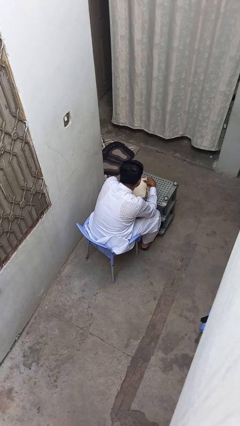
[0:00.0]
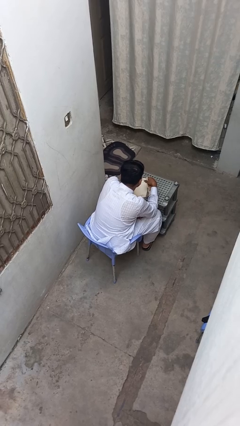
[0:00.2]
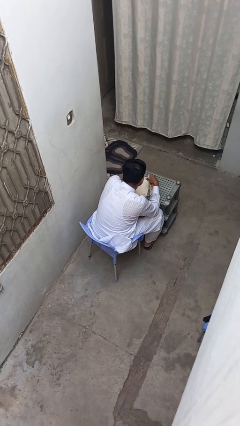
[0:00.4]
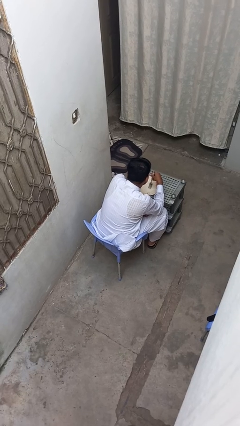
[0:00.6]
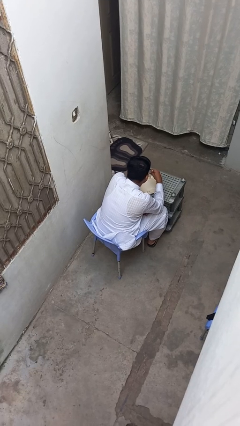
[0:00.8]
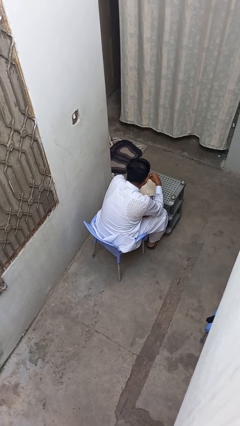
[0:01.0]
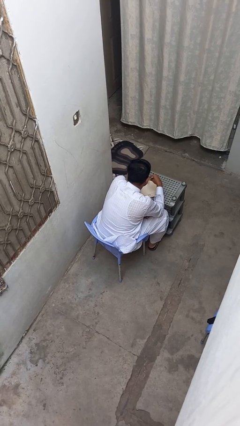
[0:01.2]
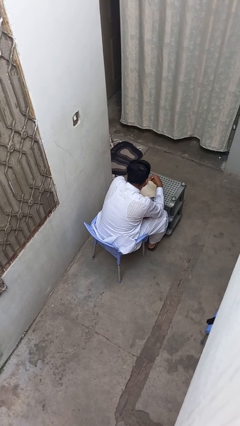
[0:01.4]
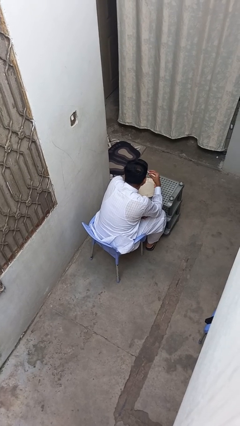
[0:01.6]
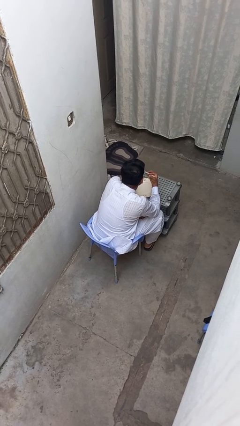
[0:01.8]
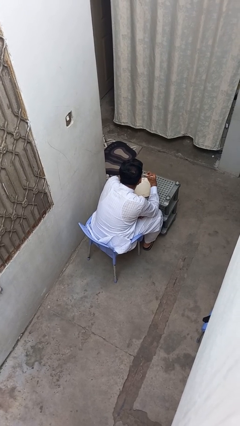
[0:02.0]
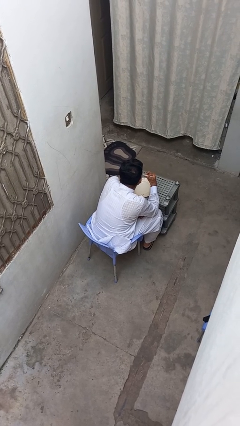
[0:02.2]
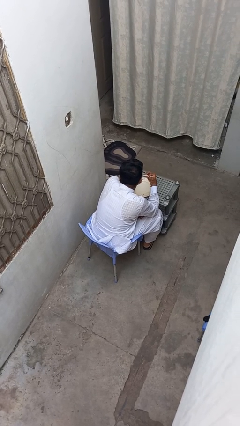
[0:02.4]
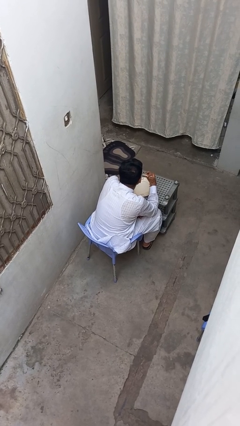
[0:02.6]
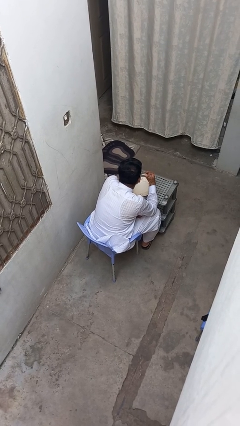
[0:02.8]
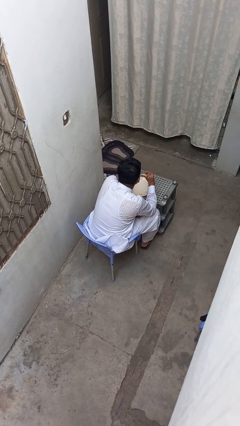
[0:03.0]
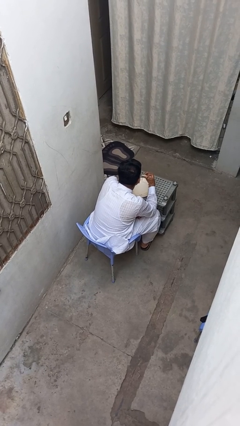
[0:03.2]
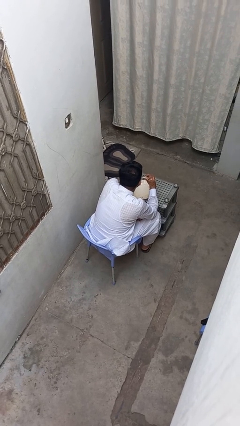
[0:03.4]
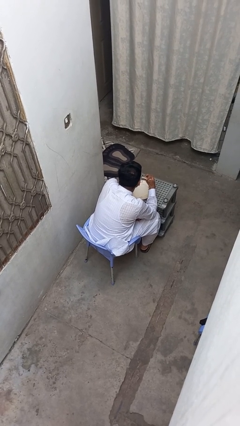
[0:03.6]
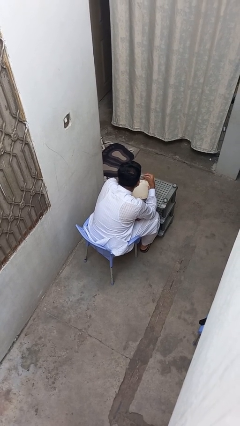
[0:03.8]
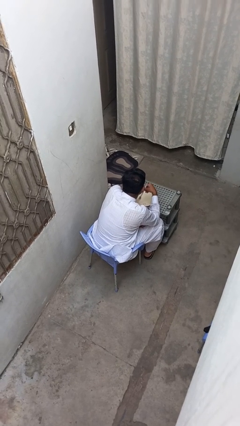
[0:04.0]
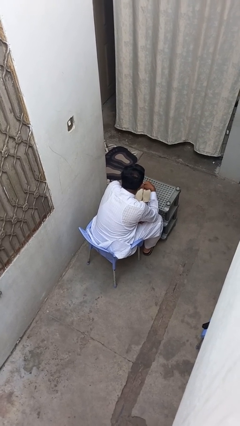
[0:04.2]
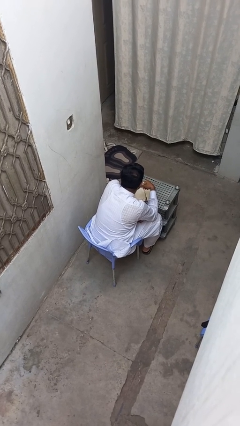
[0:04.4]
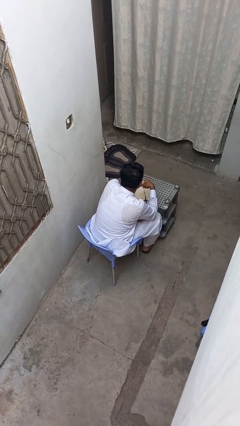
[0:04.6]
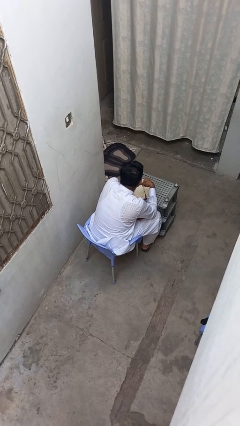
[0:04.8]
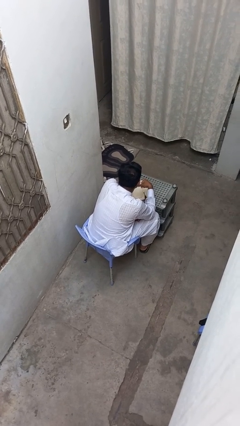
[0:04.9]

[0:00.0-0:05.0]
person eats with utensil

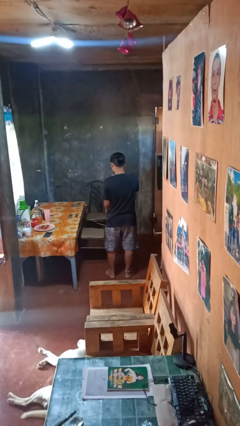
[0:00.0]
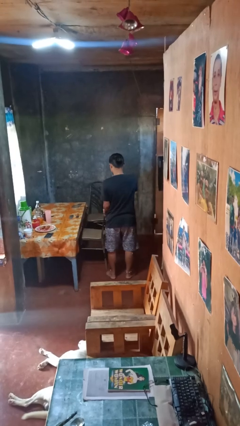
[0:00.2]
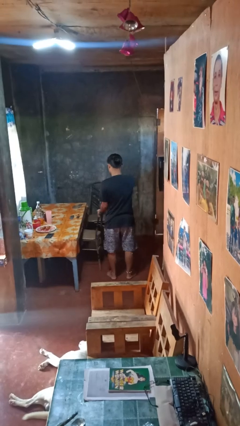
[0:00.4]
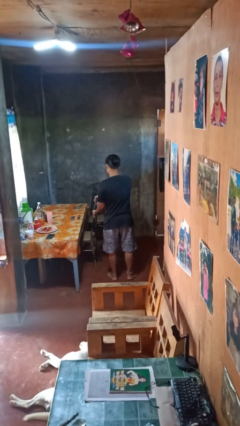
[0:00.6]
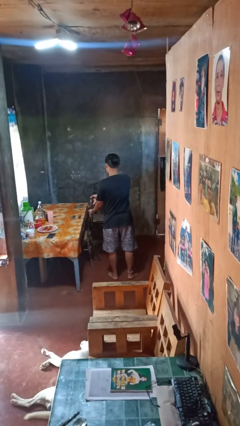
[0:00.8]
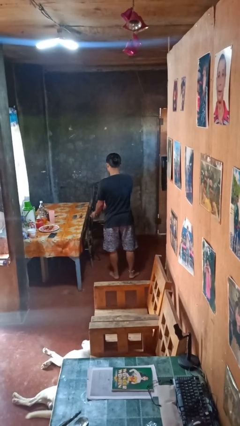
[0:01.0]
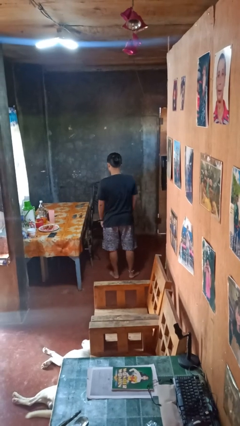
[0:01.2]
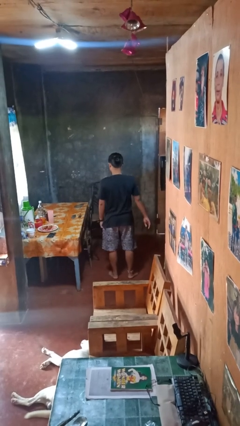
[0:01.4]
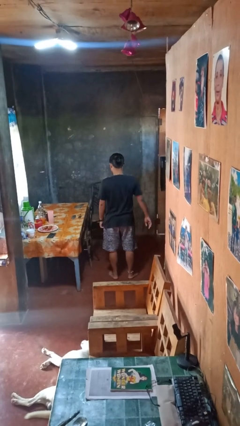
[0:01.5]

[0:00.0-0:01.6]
person pushes in chair

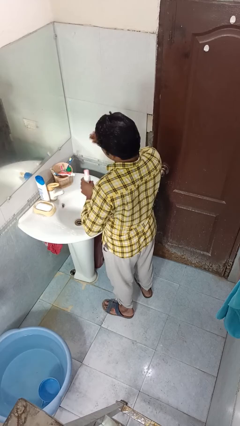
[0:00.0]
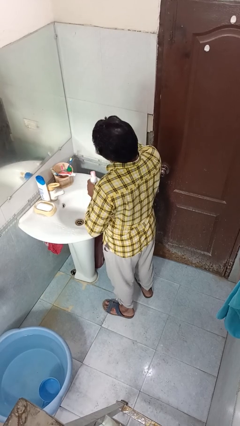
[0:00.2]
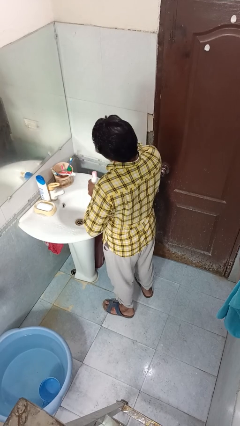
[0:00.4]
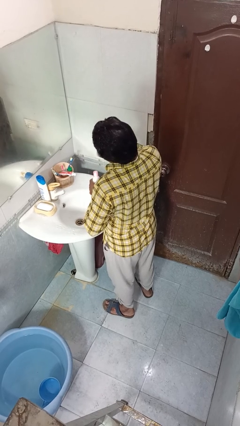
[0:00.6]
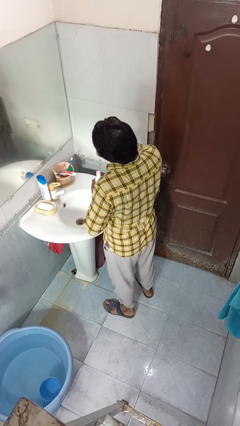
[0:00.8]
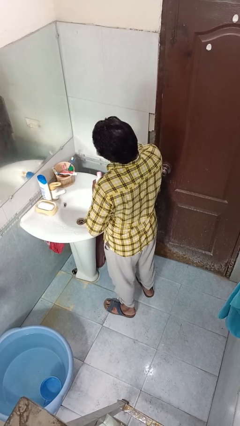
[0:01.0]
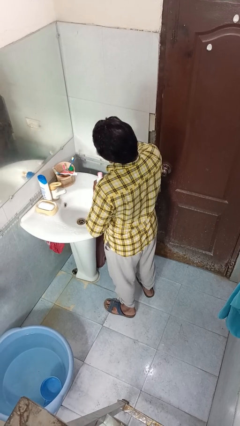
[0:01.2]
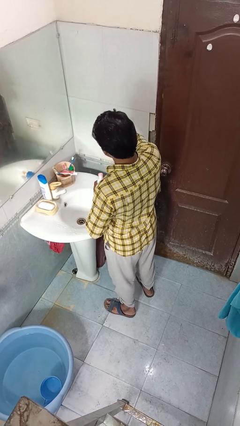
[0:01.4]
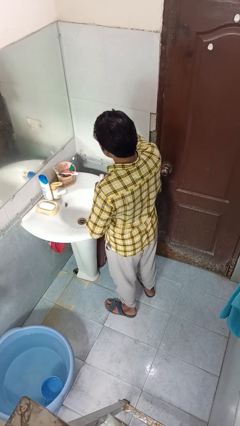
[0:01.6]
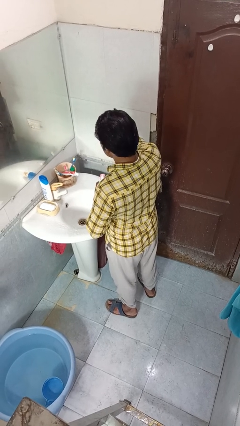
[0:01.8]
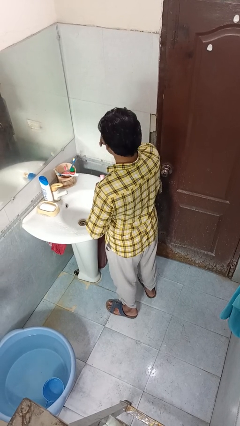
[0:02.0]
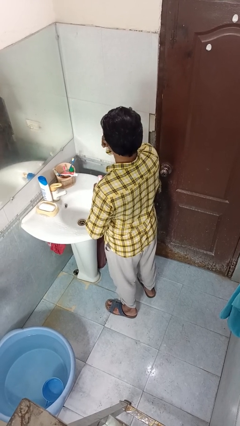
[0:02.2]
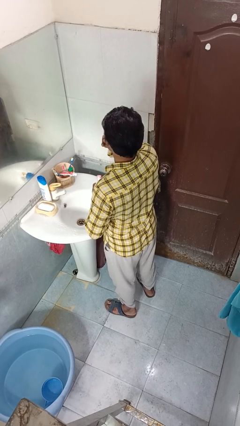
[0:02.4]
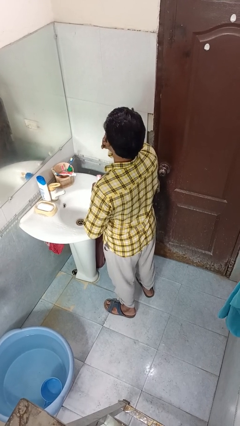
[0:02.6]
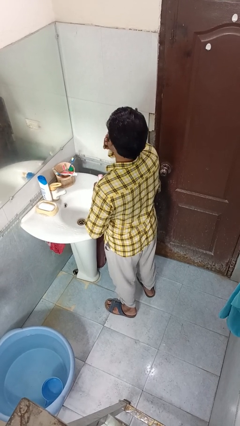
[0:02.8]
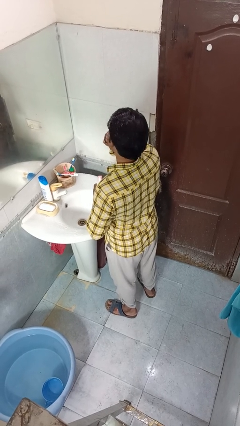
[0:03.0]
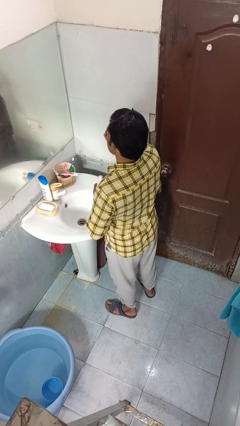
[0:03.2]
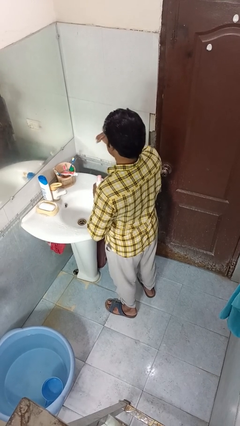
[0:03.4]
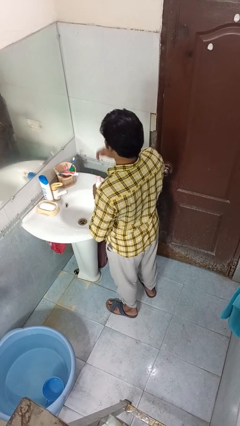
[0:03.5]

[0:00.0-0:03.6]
person applies facial moisturizer

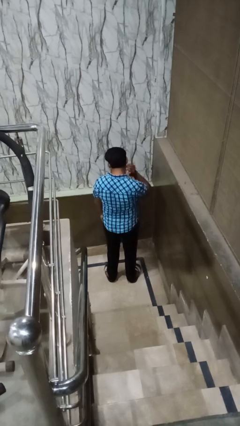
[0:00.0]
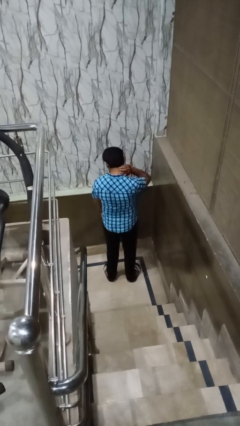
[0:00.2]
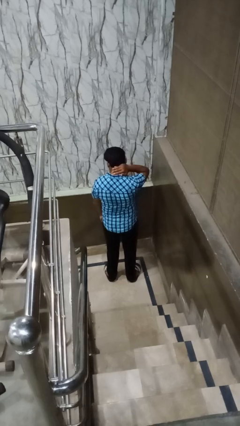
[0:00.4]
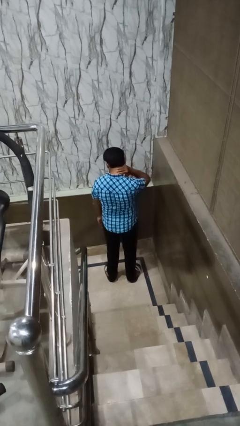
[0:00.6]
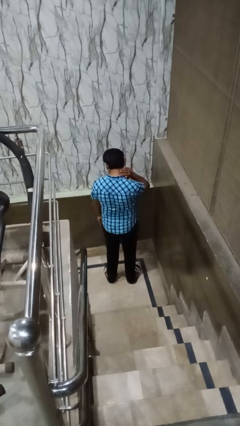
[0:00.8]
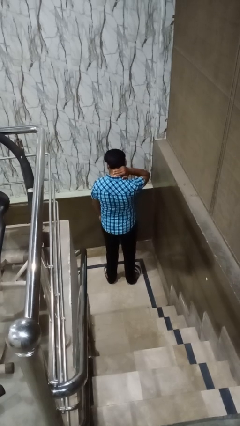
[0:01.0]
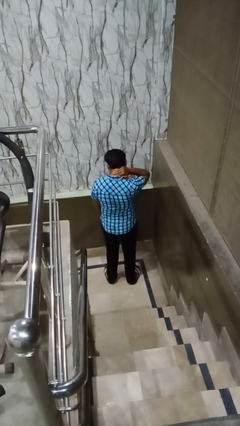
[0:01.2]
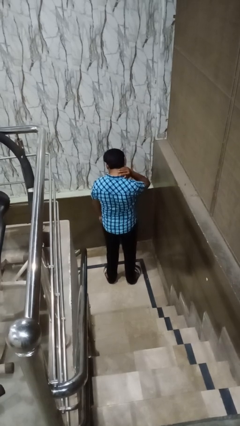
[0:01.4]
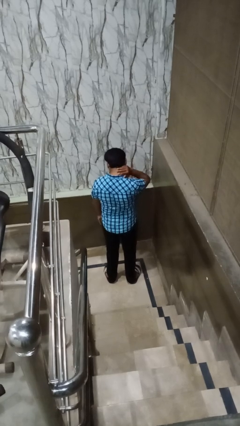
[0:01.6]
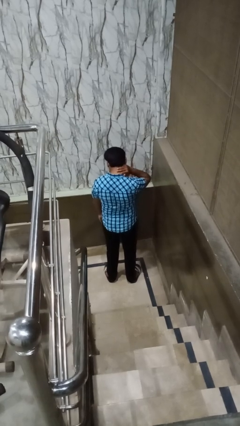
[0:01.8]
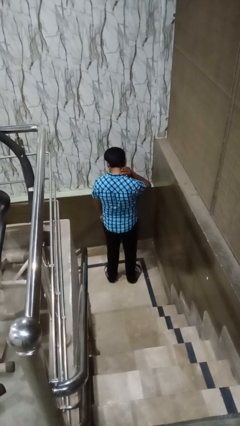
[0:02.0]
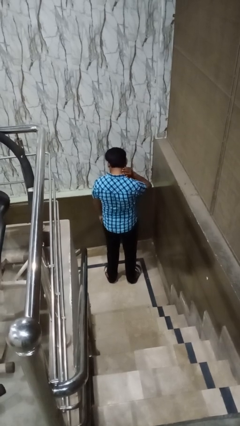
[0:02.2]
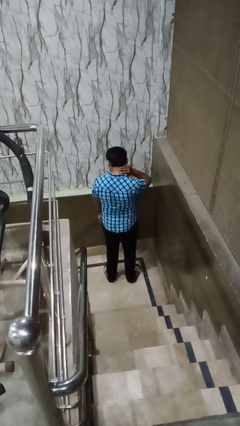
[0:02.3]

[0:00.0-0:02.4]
person rubs neck

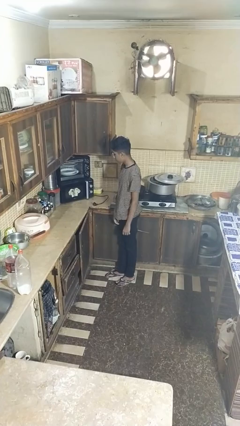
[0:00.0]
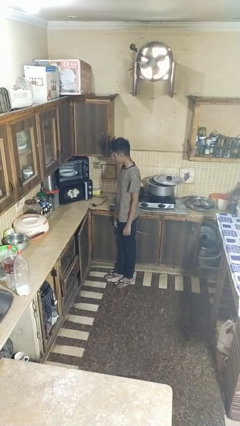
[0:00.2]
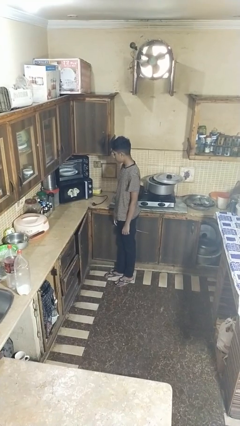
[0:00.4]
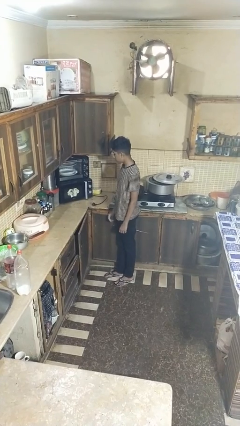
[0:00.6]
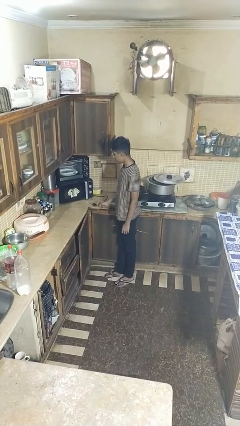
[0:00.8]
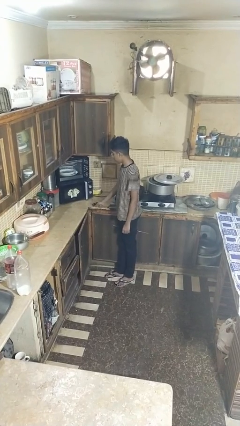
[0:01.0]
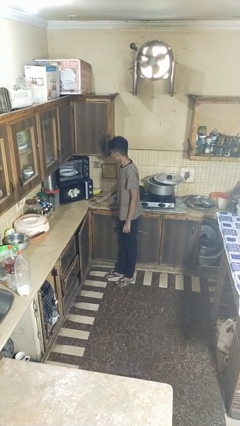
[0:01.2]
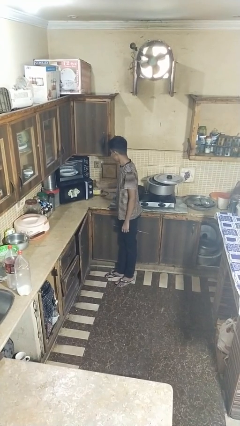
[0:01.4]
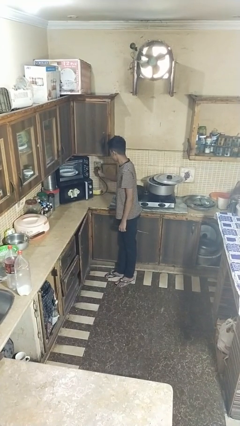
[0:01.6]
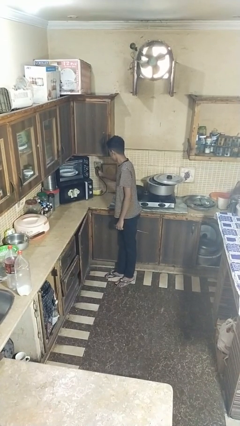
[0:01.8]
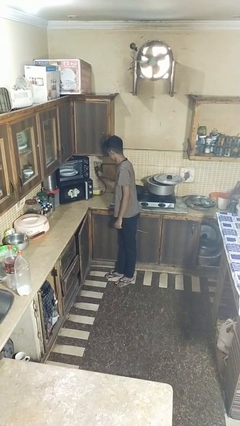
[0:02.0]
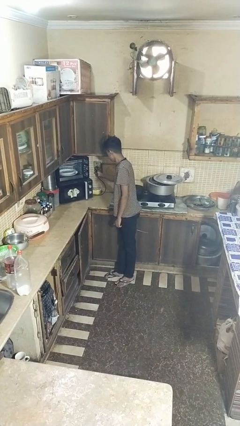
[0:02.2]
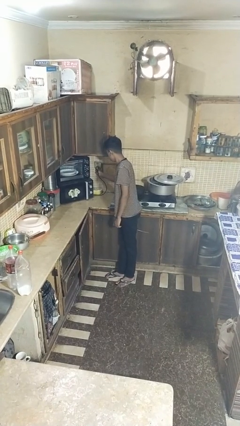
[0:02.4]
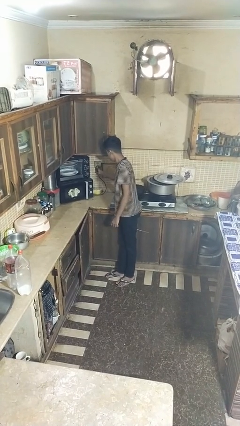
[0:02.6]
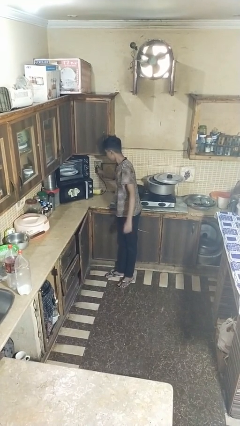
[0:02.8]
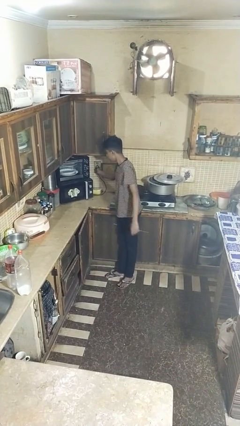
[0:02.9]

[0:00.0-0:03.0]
person plugs into electrical socket

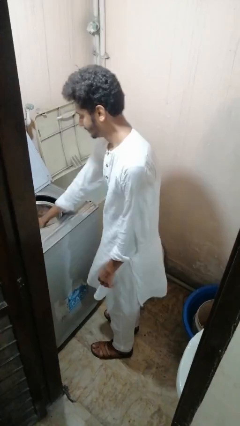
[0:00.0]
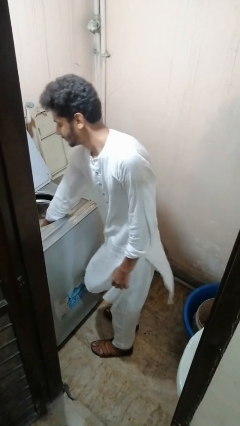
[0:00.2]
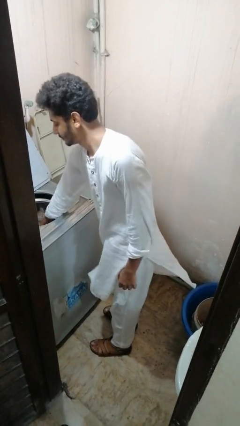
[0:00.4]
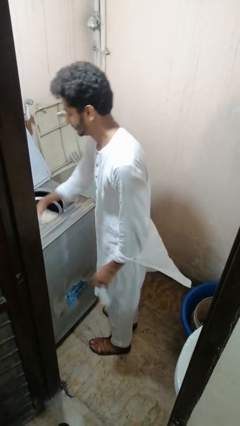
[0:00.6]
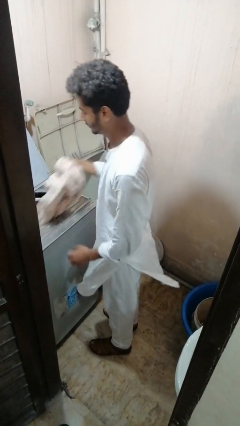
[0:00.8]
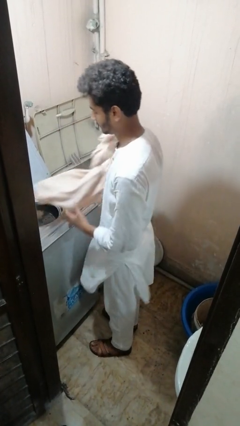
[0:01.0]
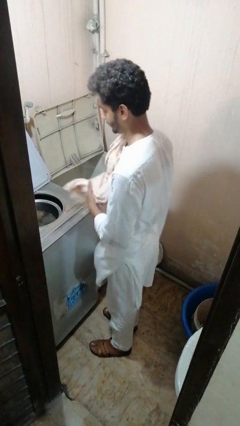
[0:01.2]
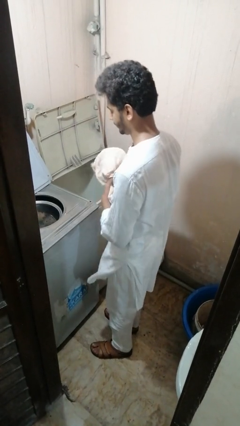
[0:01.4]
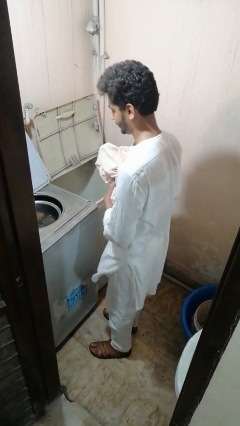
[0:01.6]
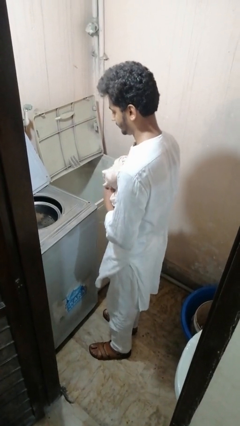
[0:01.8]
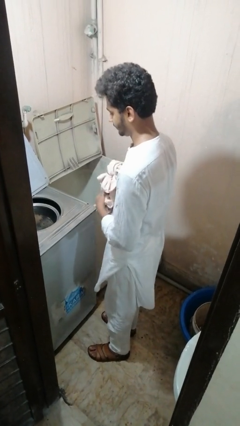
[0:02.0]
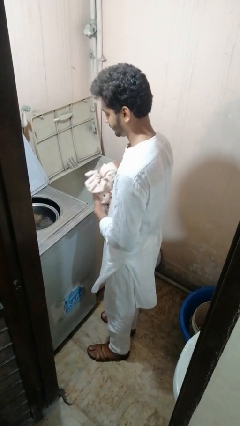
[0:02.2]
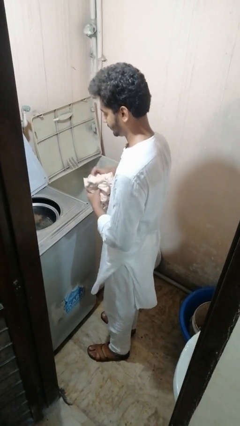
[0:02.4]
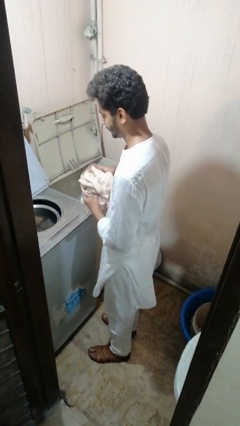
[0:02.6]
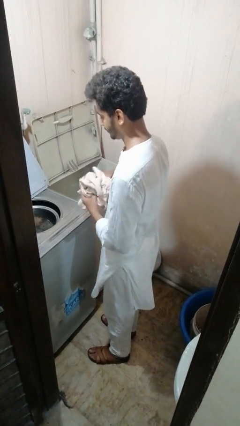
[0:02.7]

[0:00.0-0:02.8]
person unloads dryer
